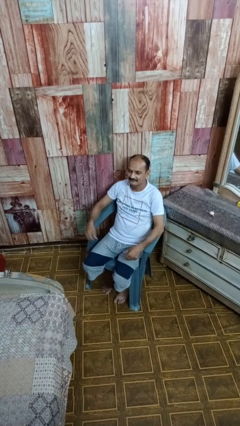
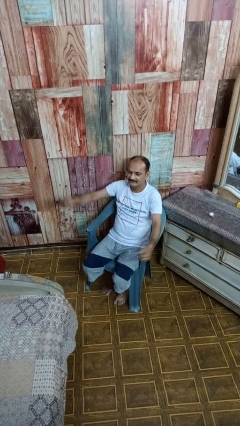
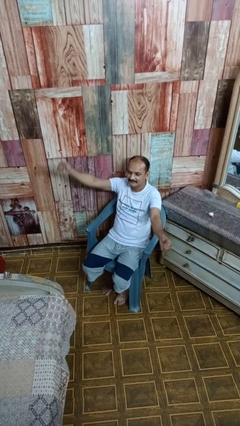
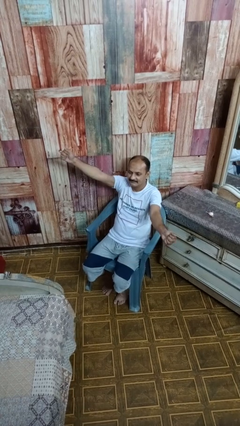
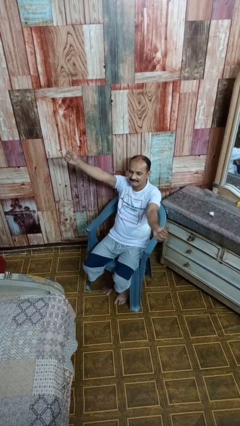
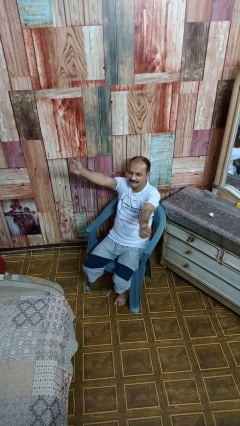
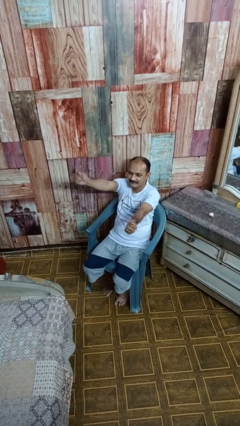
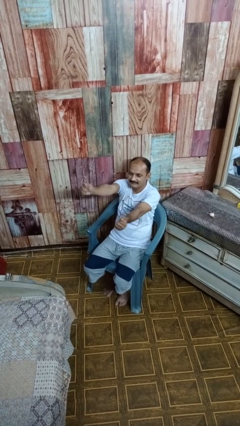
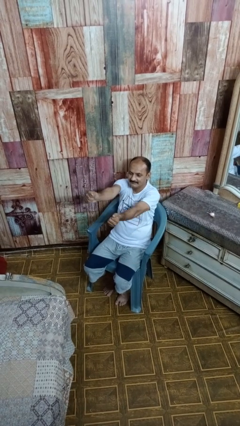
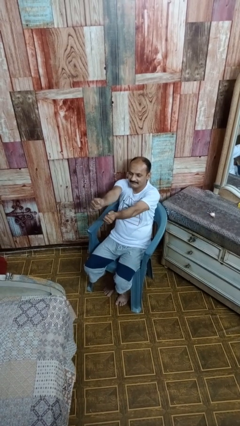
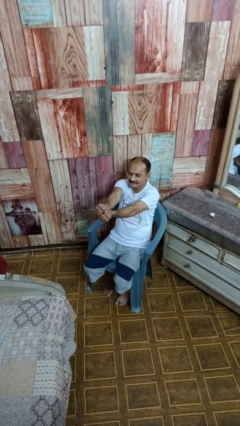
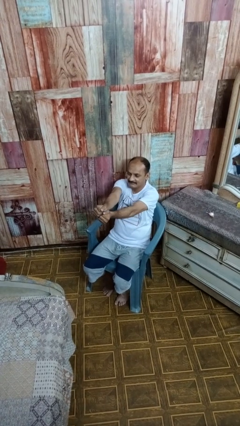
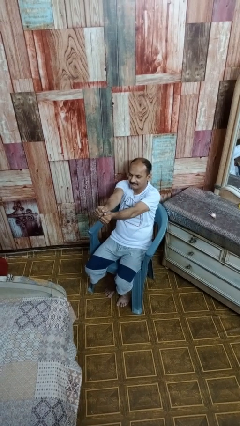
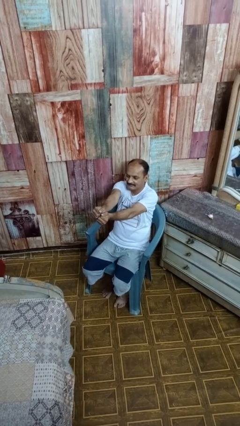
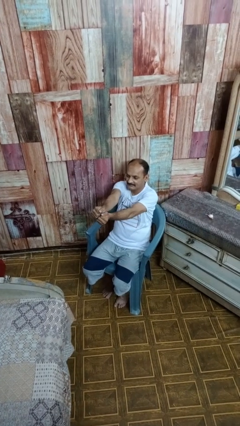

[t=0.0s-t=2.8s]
person gestures zoom in

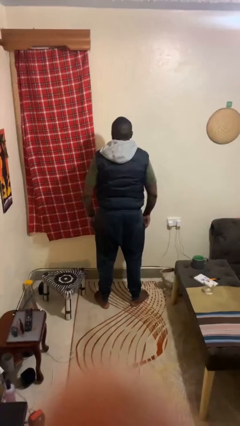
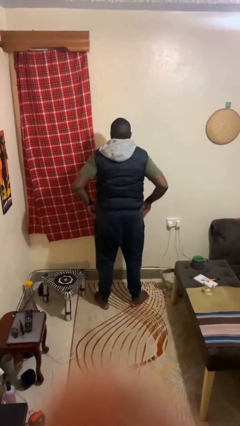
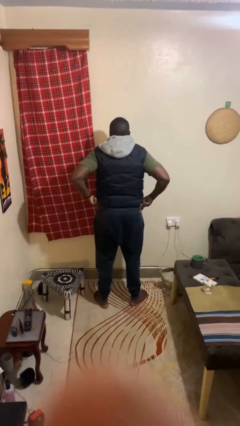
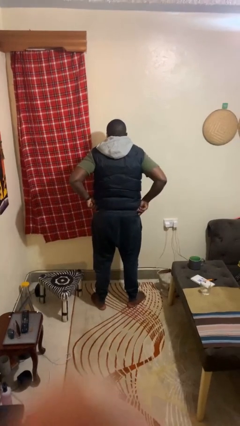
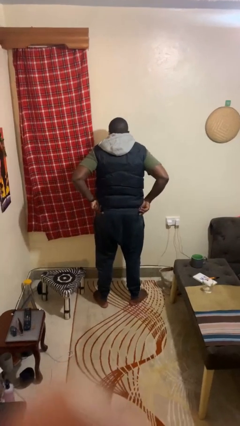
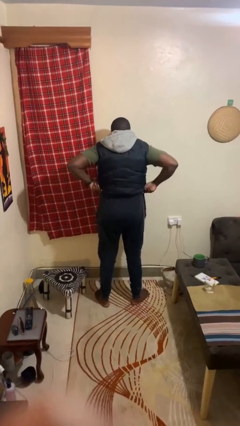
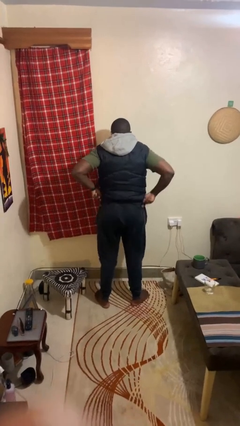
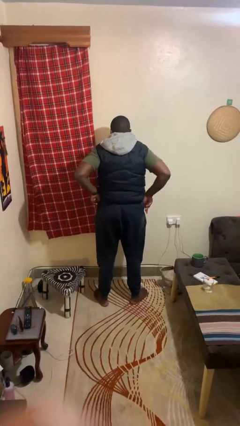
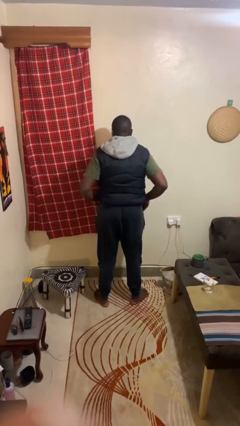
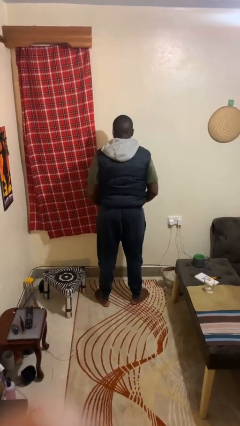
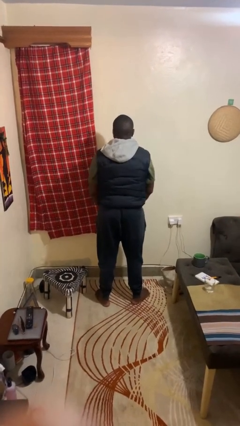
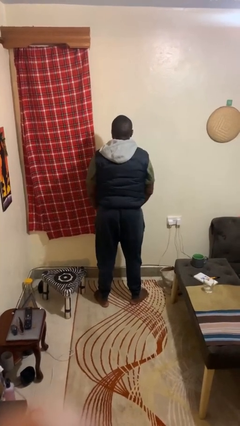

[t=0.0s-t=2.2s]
person hikes up pants

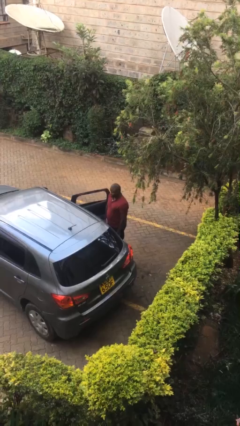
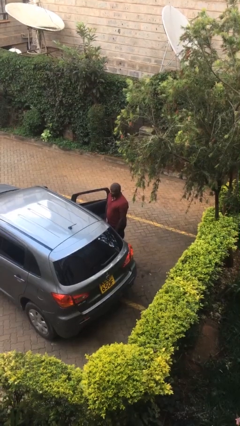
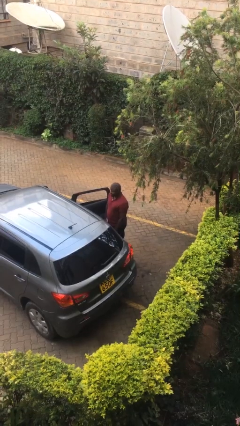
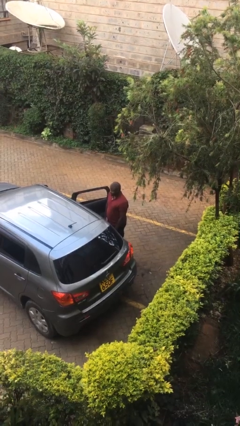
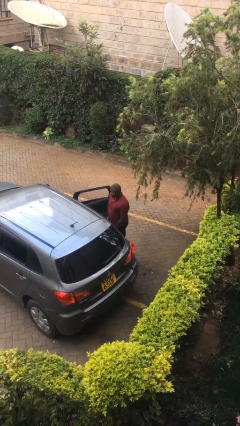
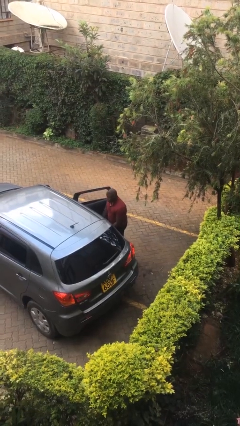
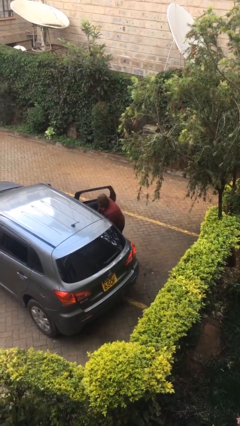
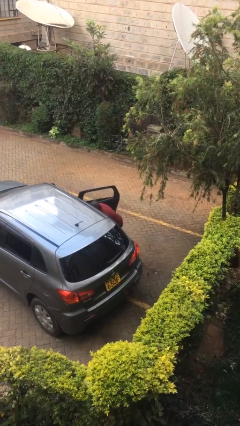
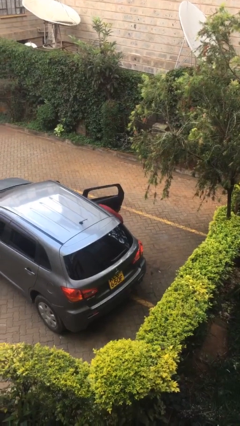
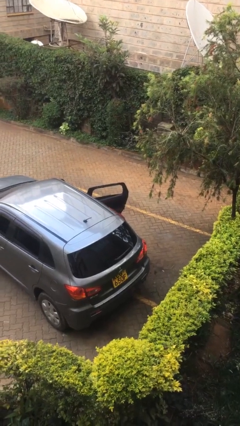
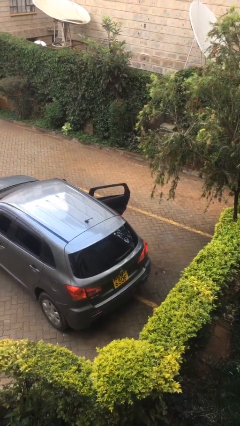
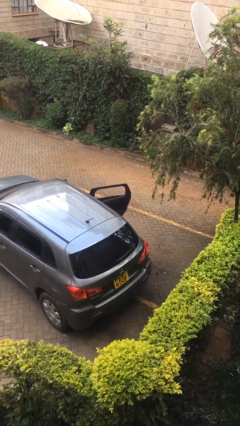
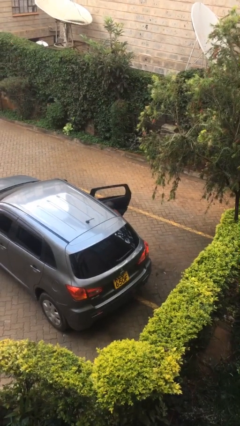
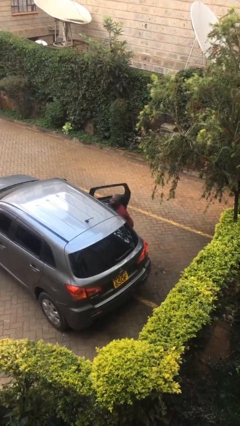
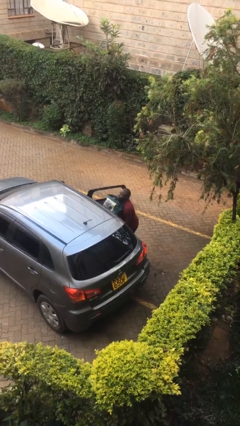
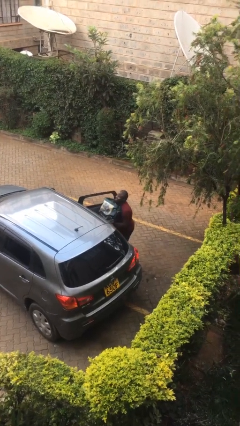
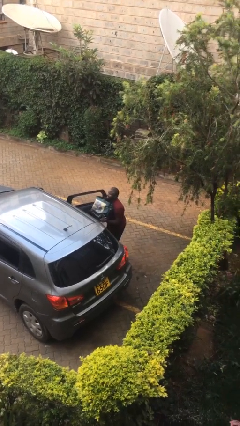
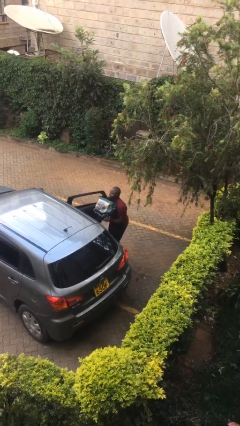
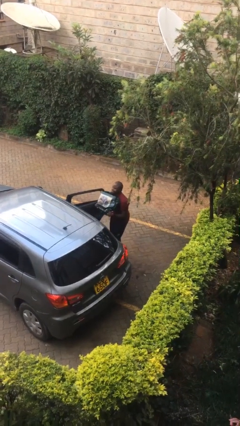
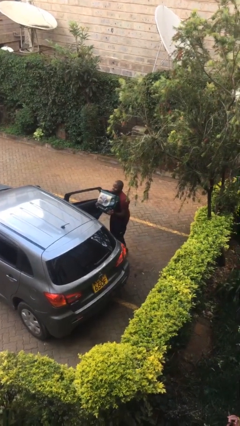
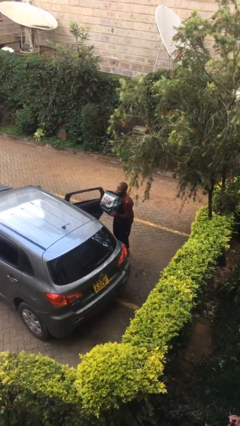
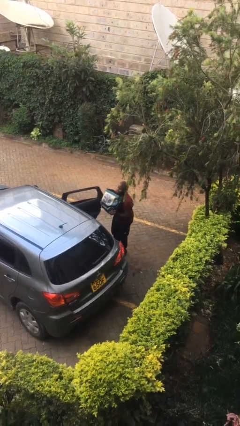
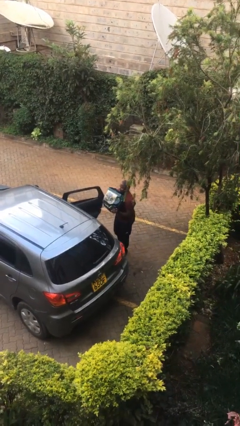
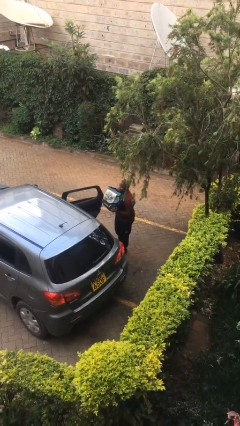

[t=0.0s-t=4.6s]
person unloads car

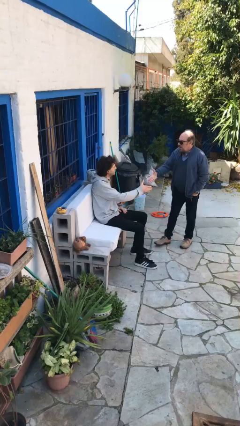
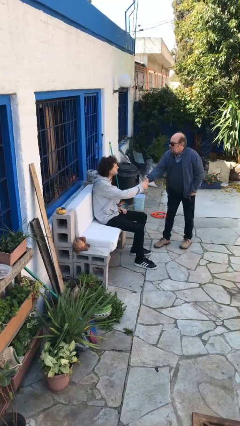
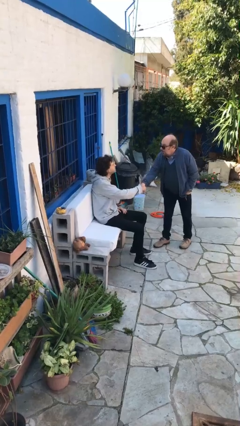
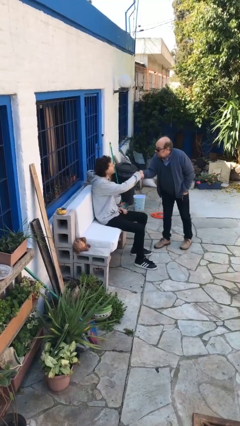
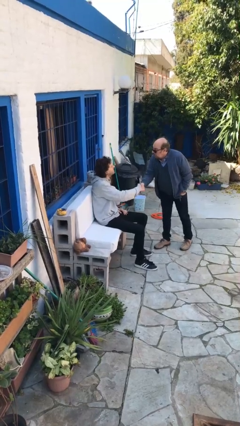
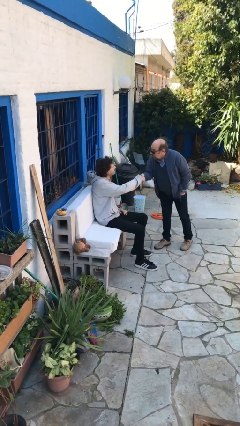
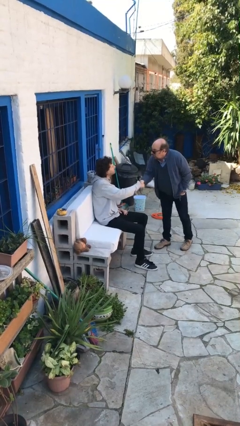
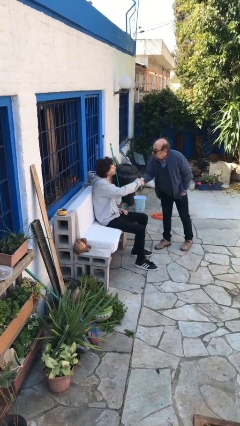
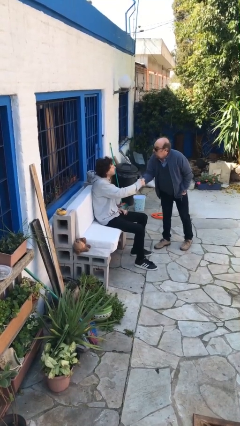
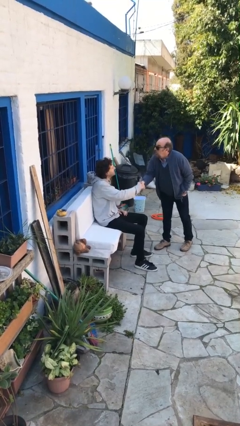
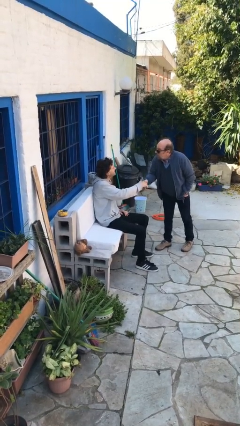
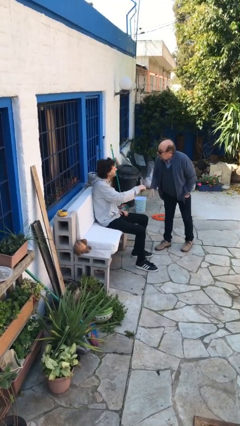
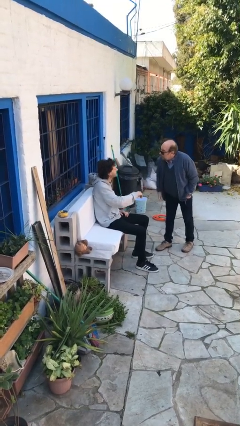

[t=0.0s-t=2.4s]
person shakes hand

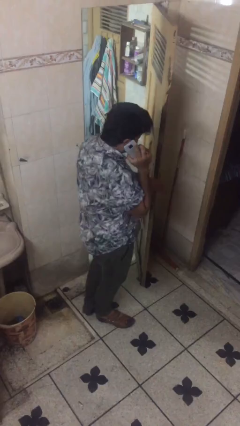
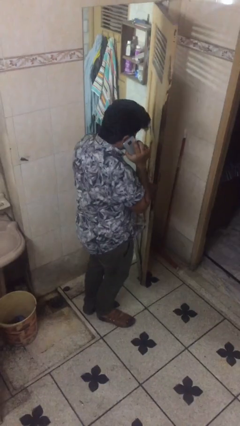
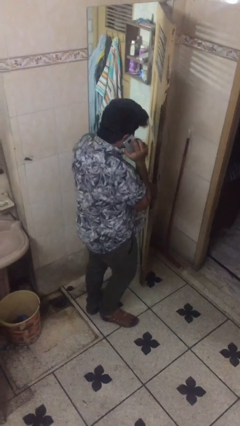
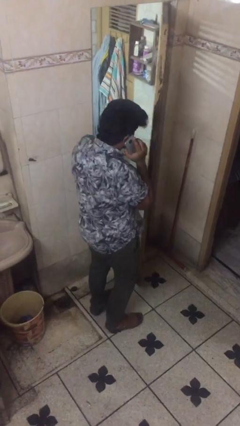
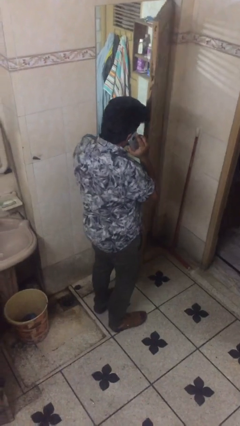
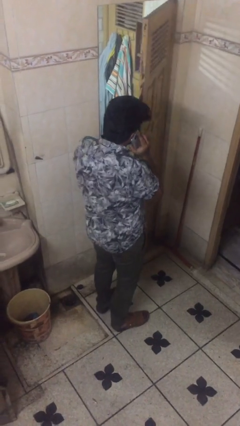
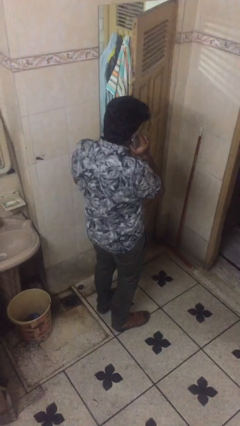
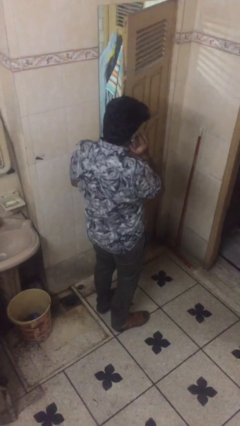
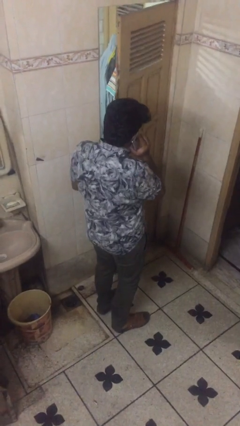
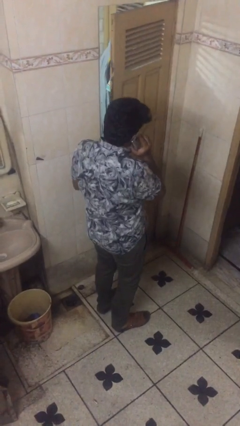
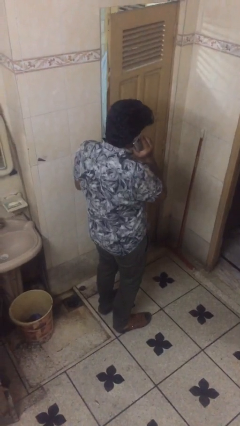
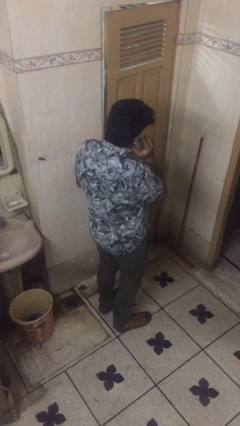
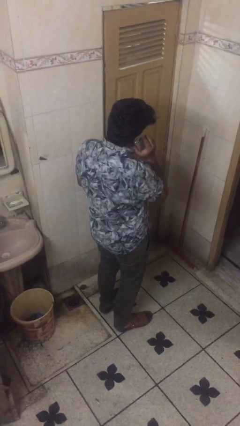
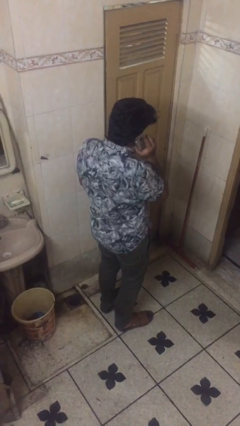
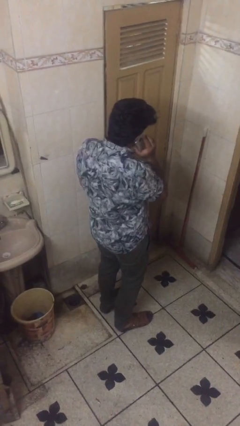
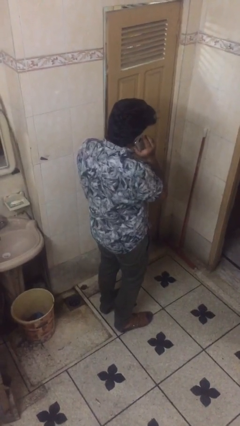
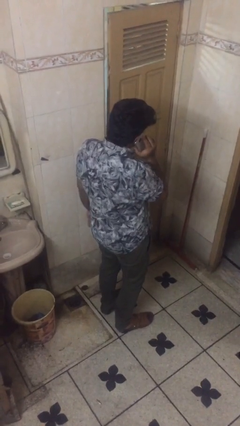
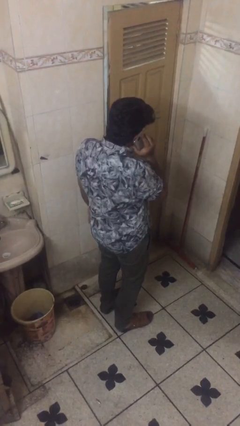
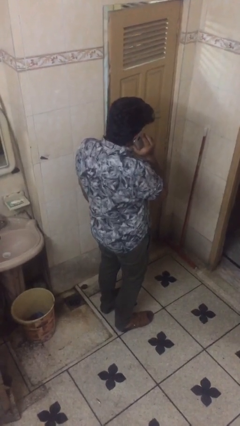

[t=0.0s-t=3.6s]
person closes facility door

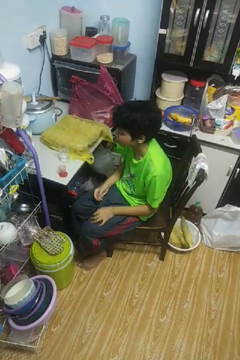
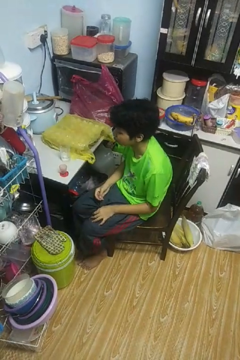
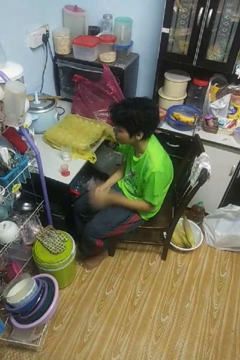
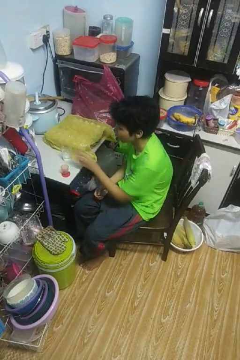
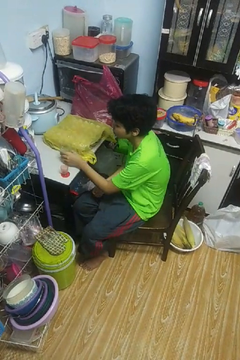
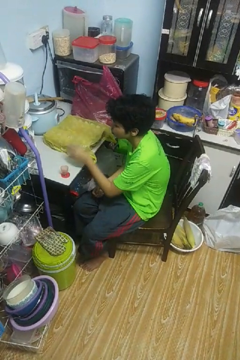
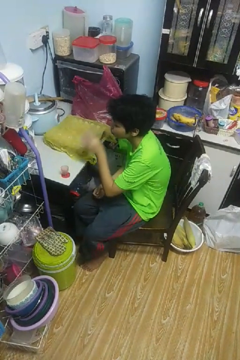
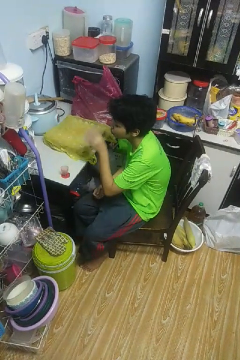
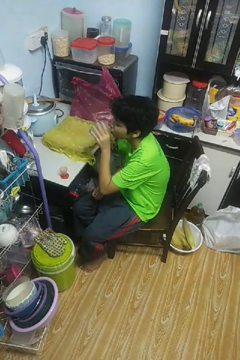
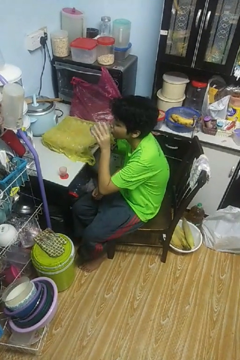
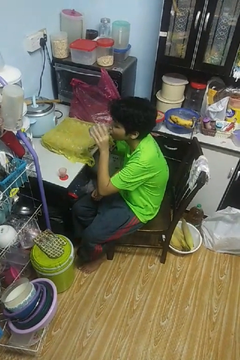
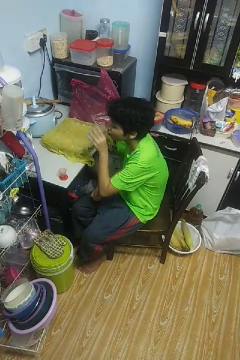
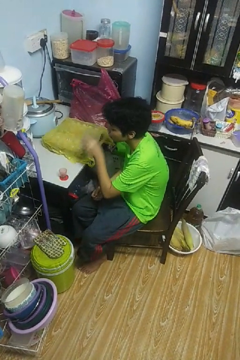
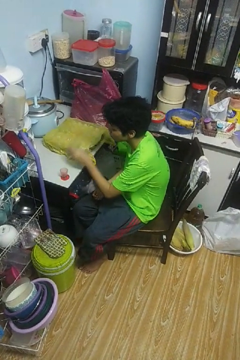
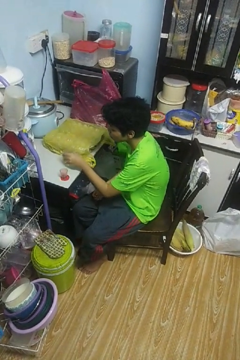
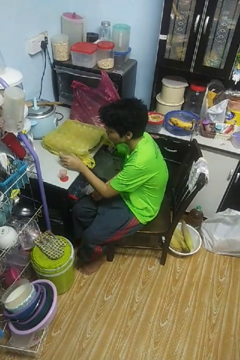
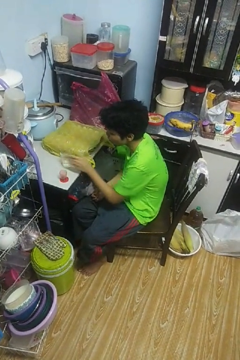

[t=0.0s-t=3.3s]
person drinks from cup
